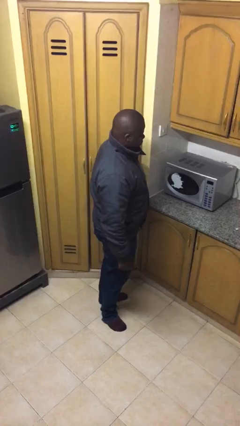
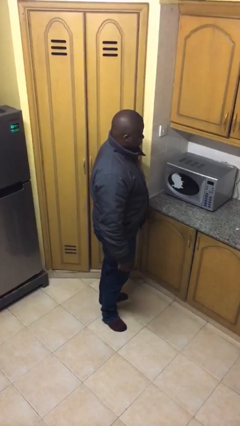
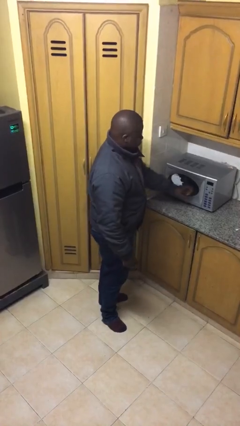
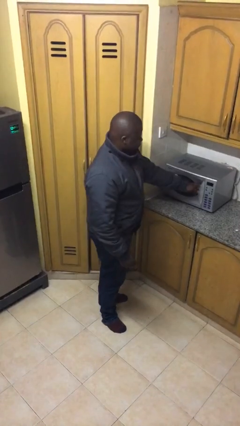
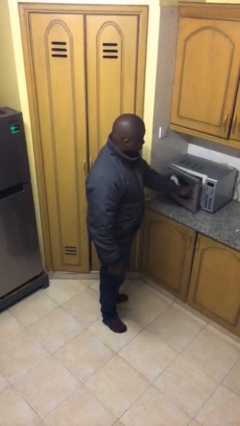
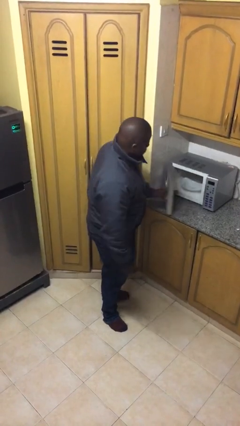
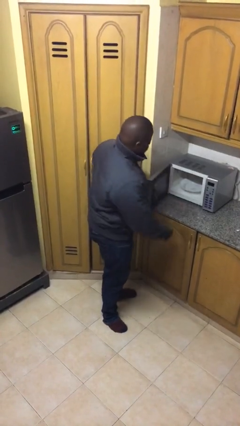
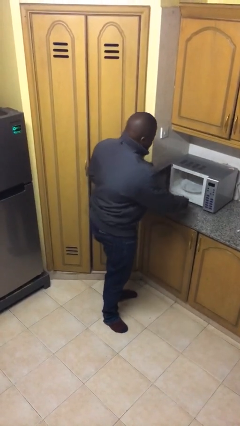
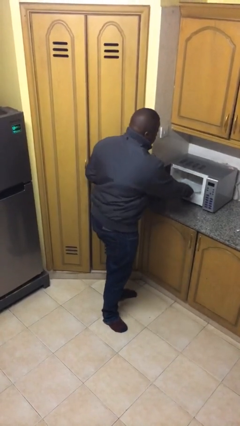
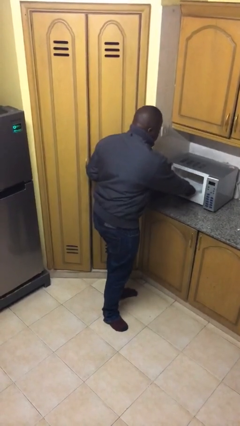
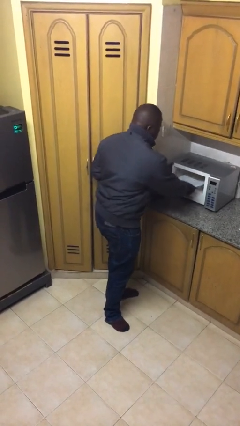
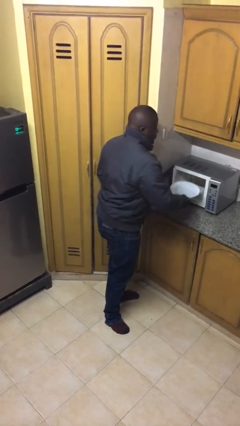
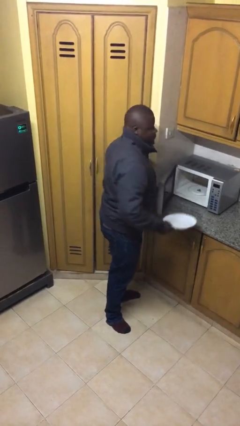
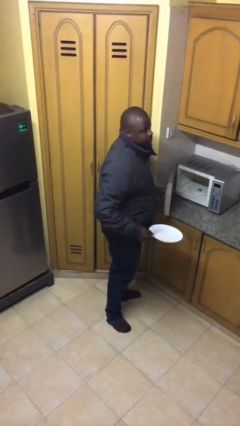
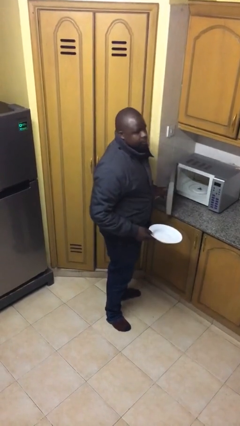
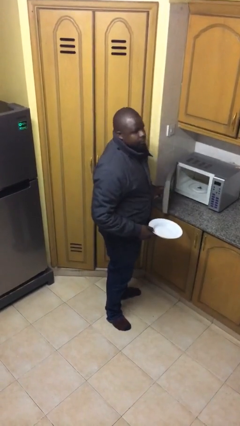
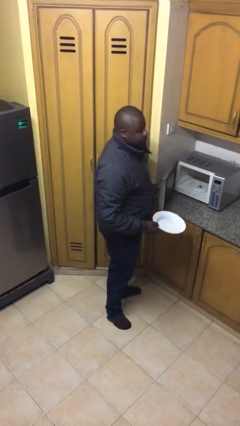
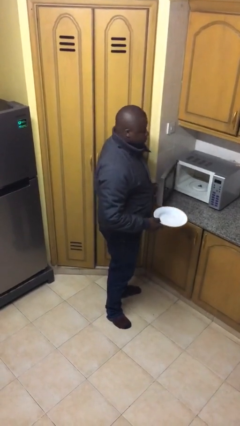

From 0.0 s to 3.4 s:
person takes object from microwave

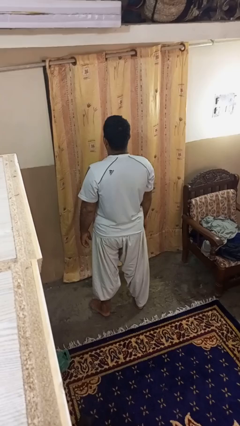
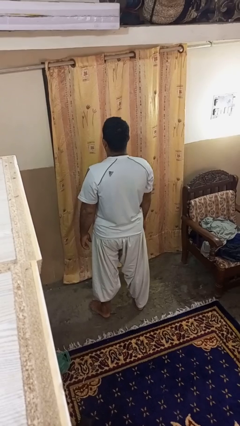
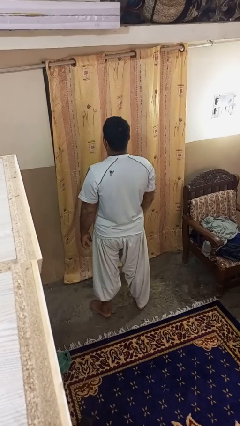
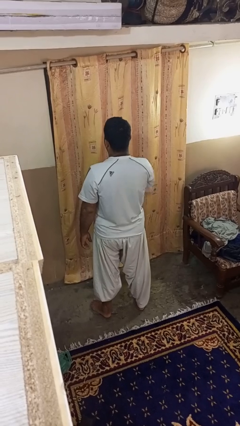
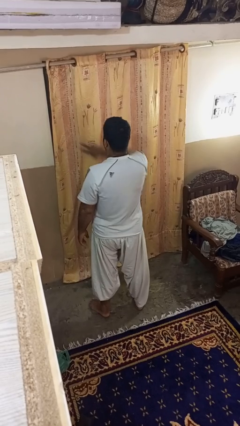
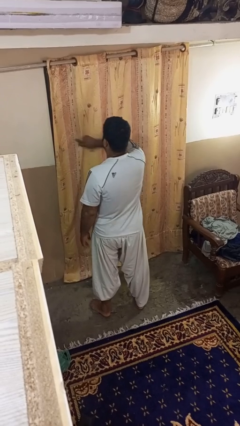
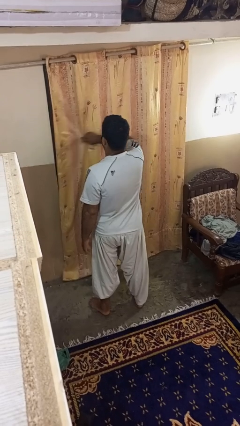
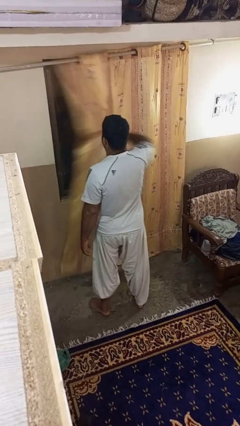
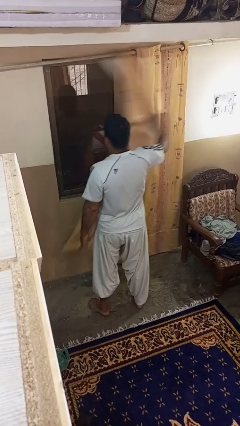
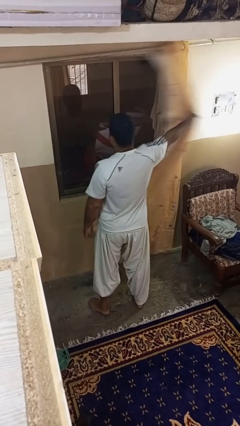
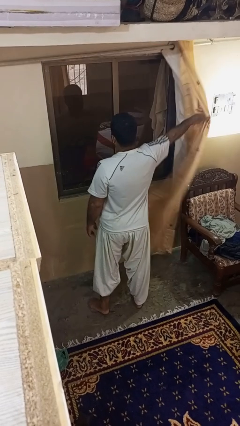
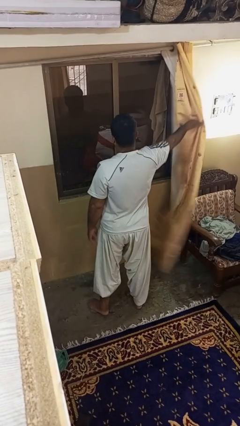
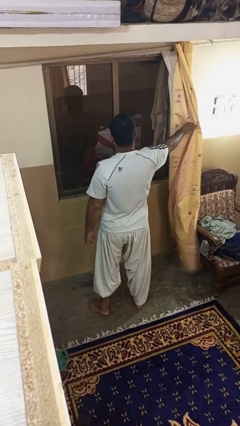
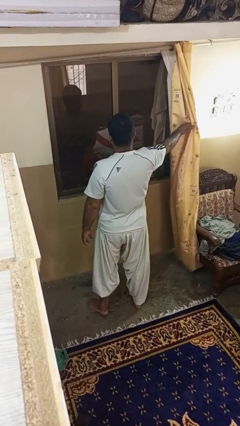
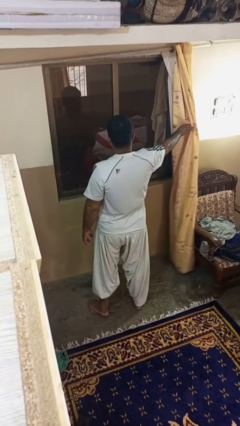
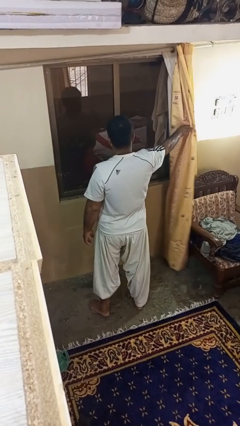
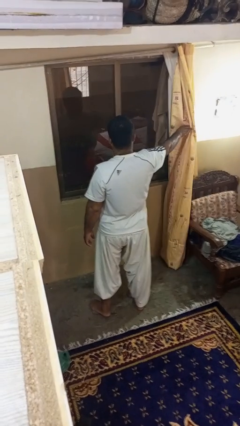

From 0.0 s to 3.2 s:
person opens curtains

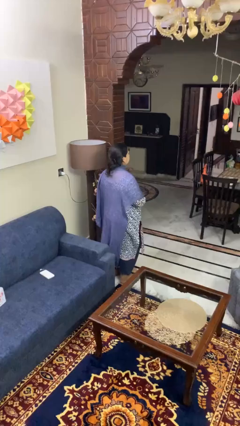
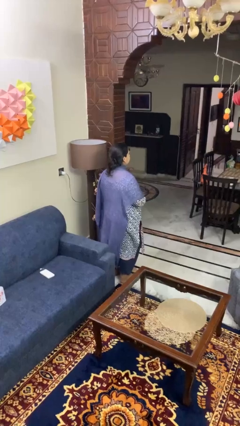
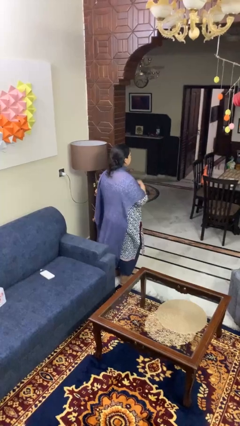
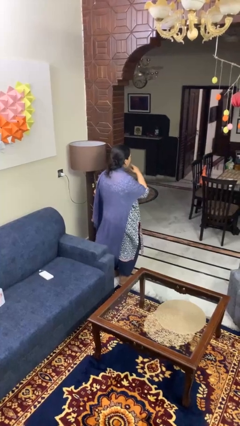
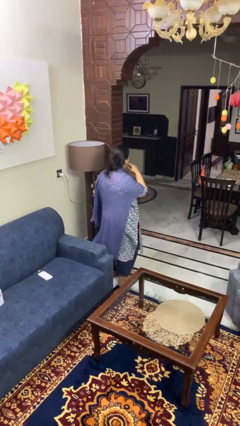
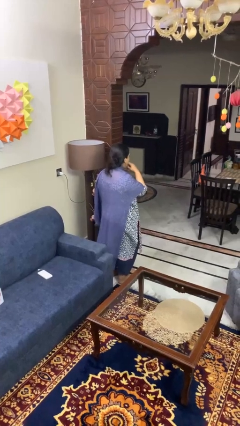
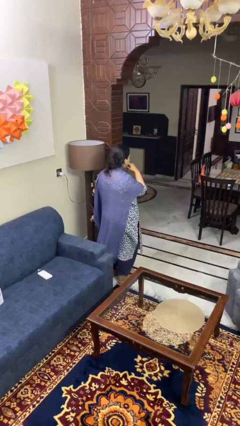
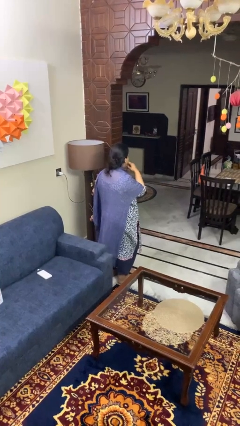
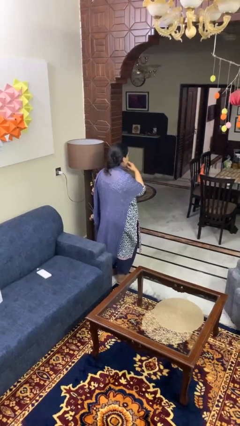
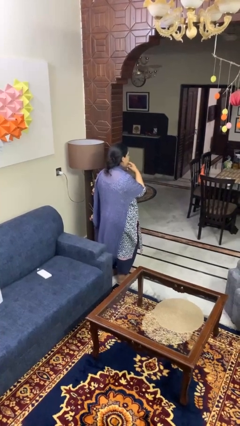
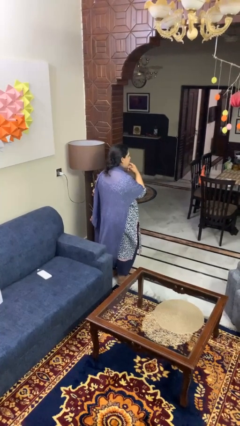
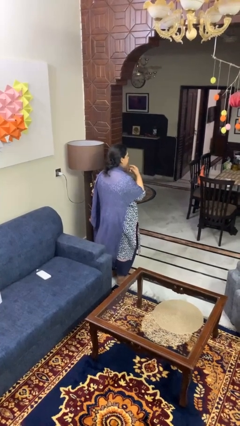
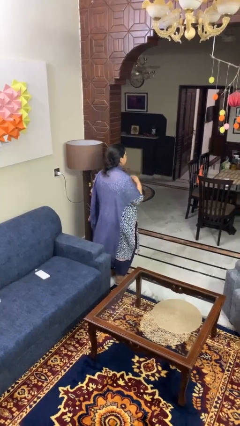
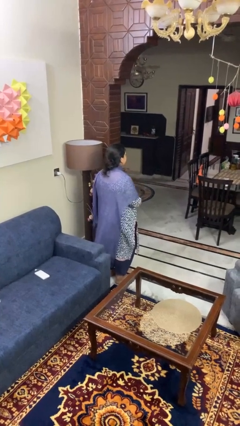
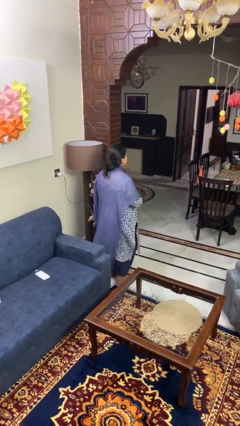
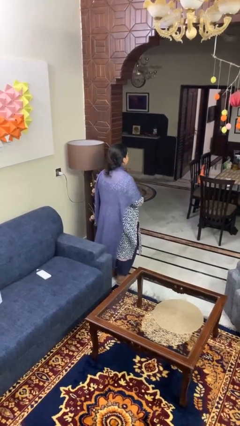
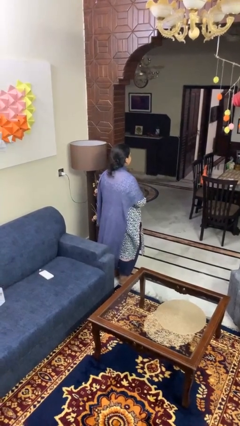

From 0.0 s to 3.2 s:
person licks fingers

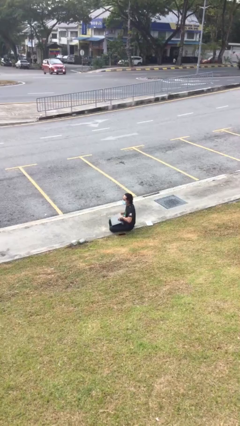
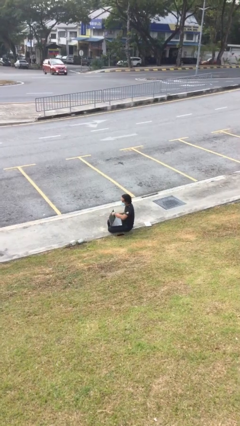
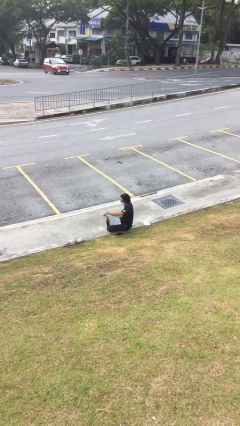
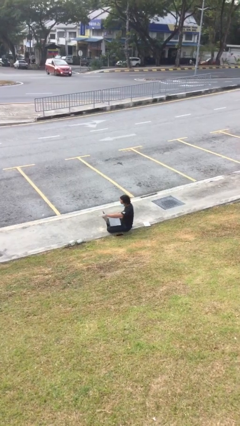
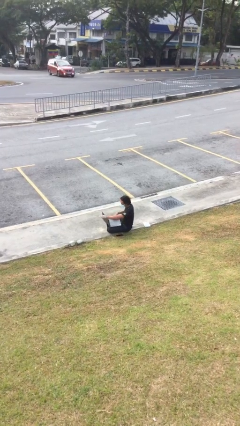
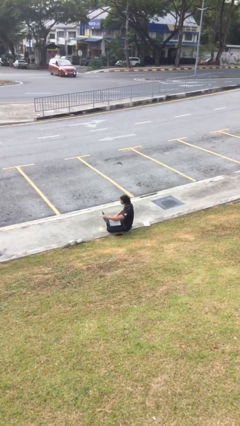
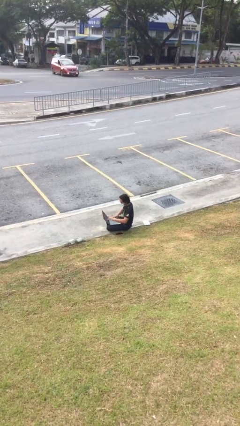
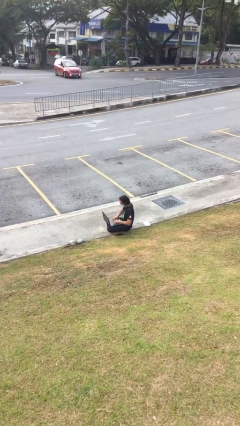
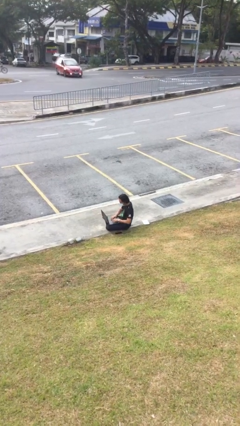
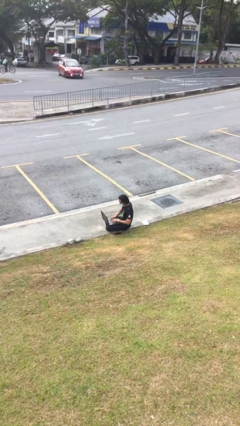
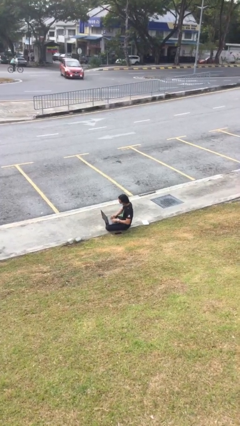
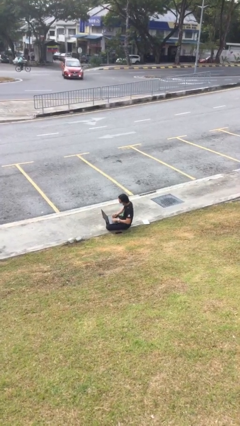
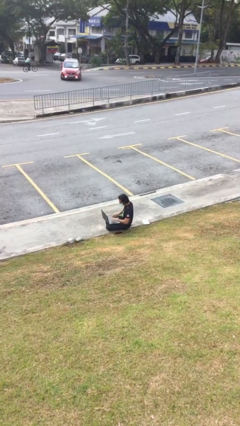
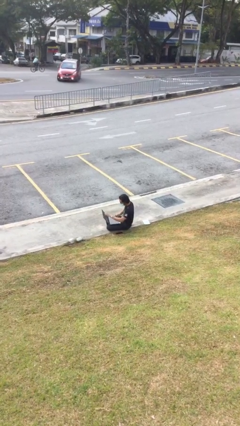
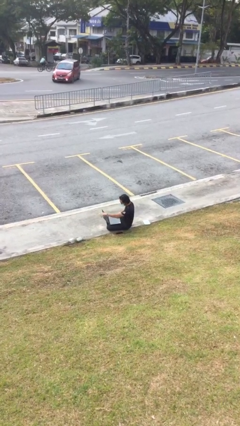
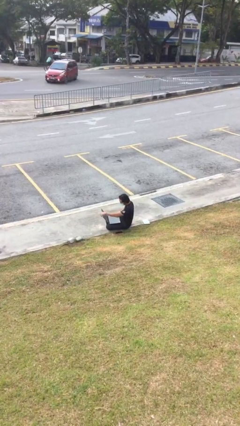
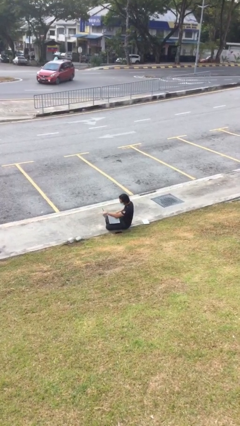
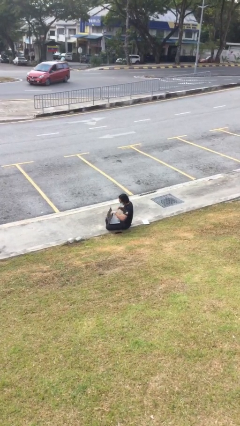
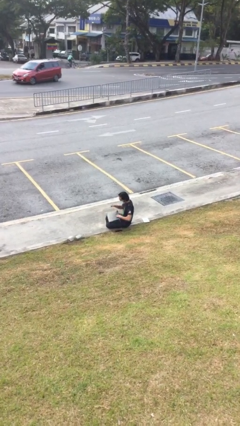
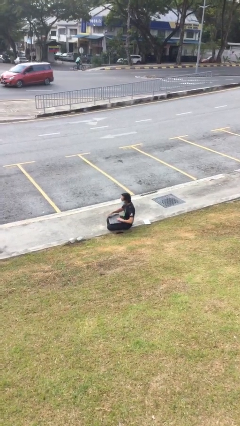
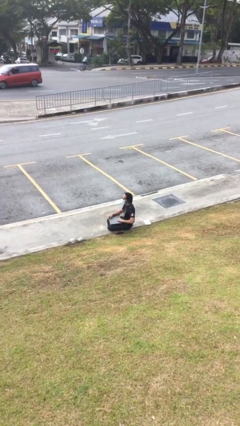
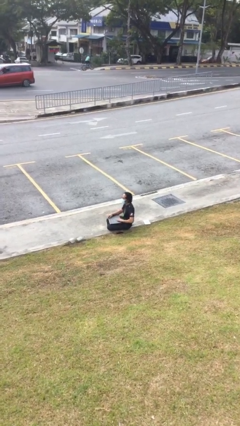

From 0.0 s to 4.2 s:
person interacts with laptop

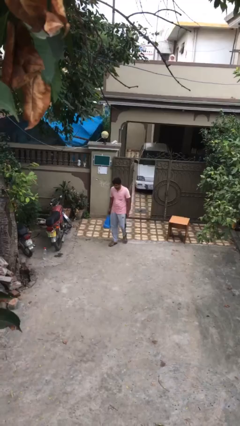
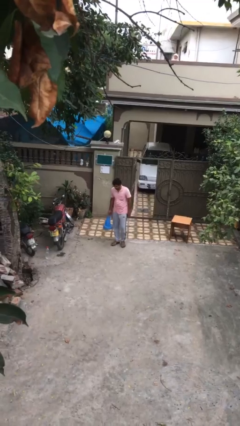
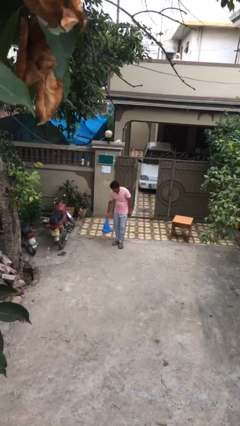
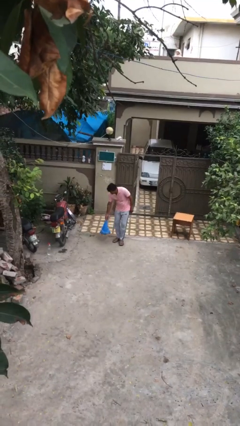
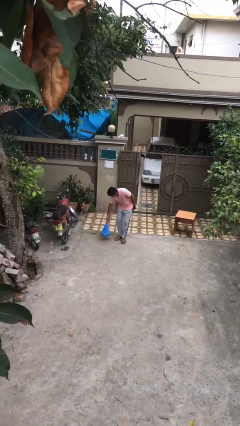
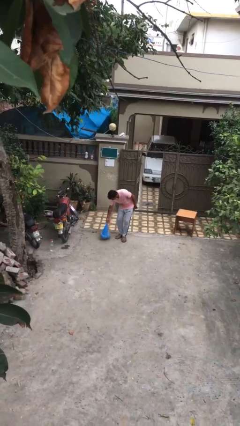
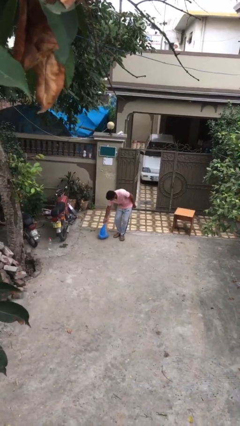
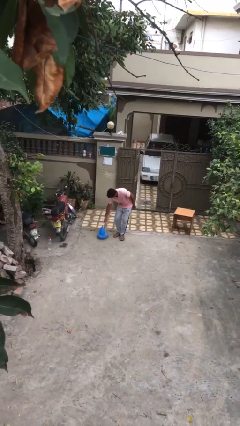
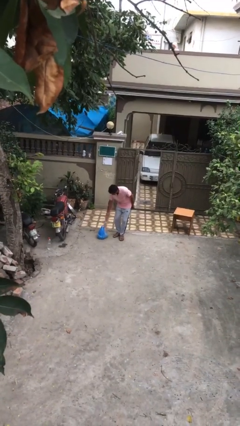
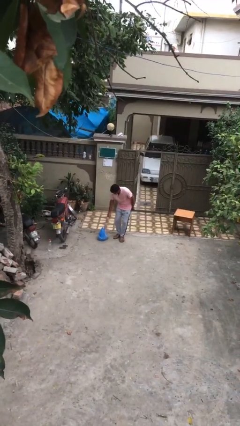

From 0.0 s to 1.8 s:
person puts down object on floor

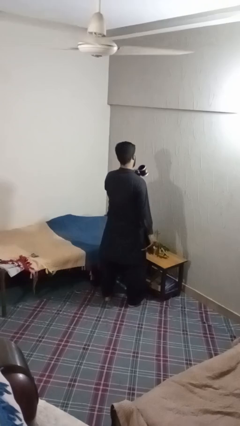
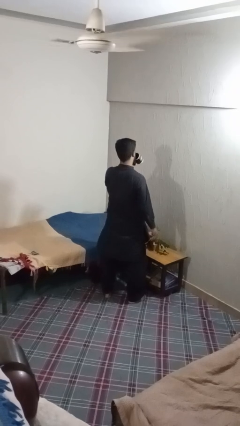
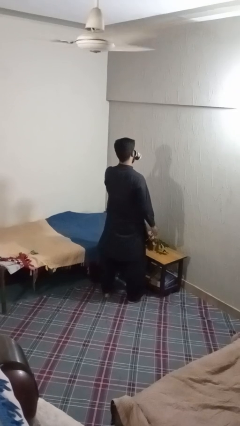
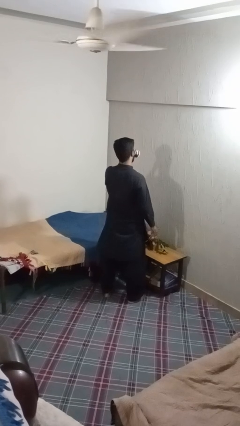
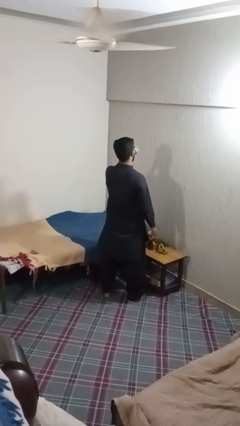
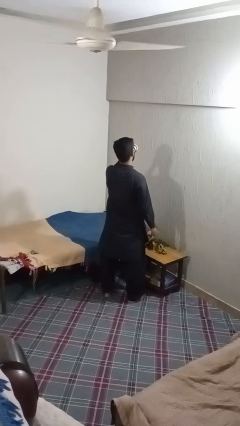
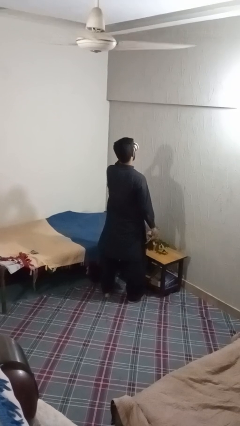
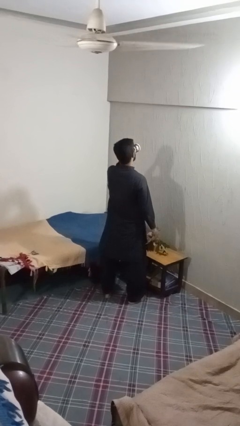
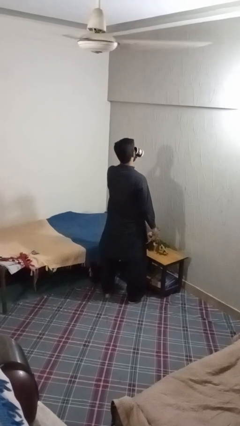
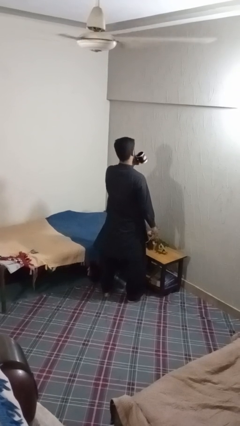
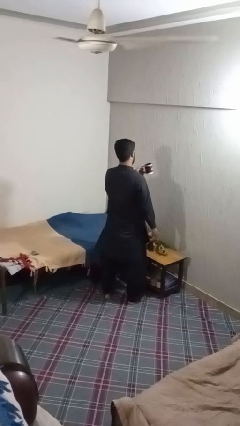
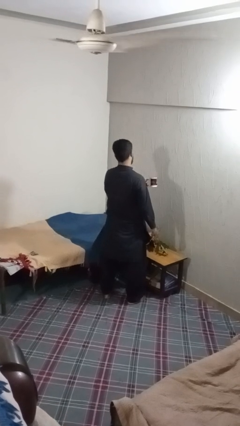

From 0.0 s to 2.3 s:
person drinks from mug
